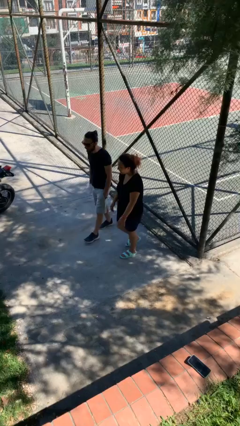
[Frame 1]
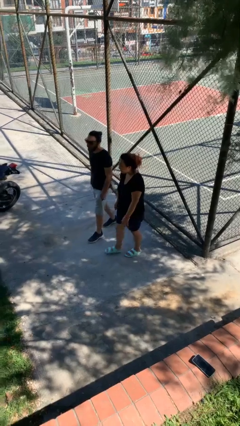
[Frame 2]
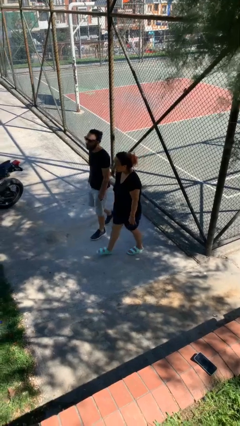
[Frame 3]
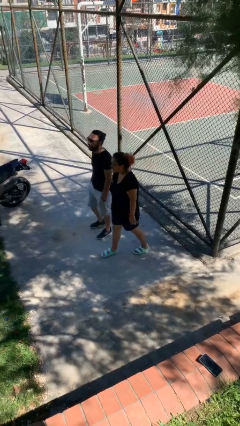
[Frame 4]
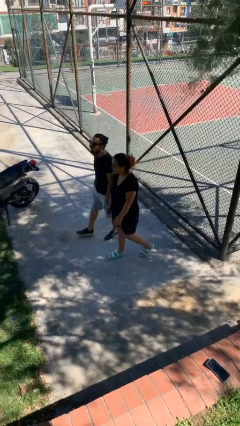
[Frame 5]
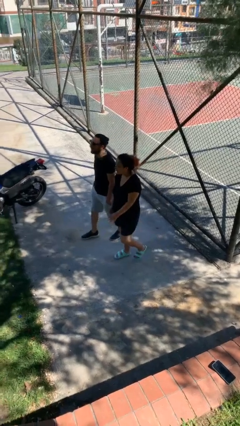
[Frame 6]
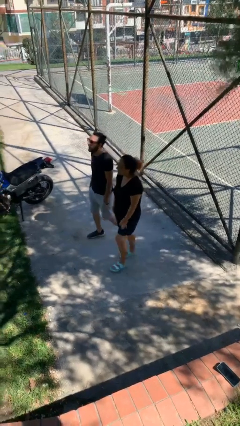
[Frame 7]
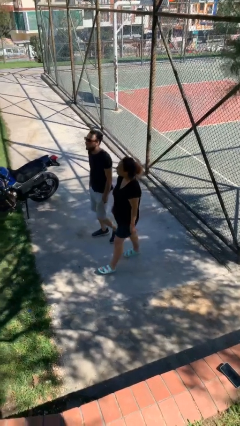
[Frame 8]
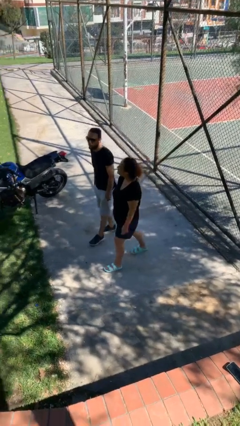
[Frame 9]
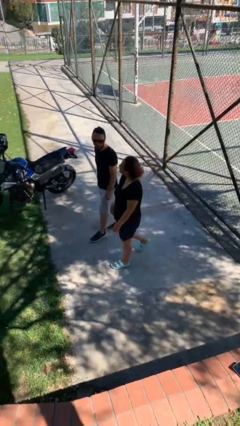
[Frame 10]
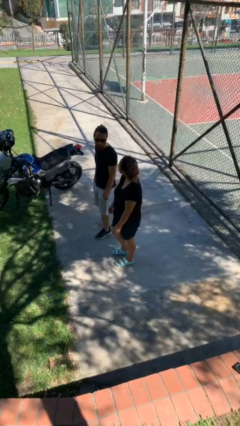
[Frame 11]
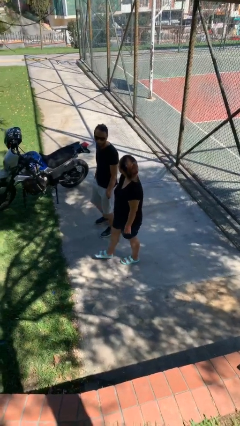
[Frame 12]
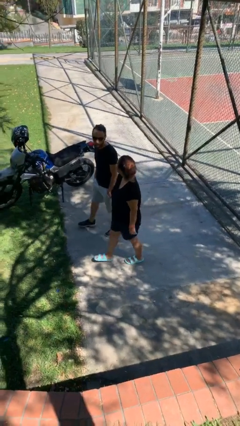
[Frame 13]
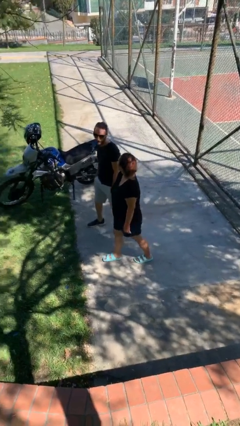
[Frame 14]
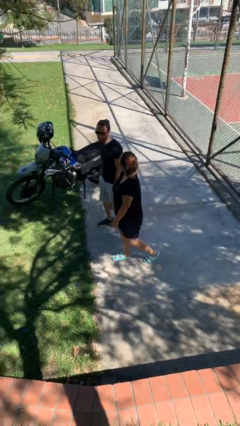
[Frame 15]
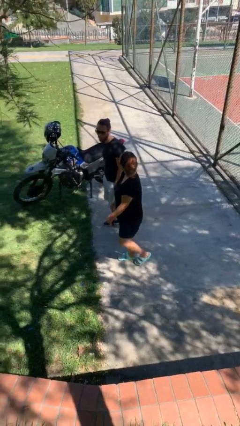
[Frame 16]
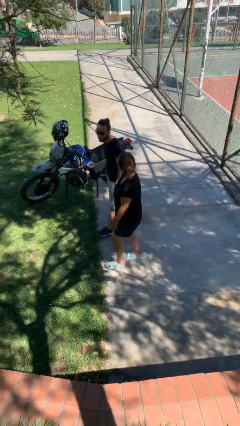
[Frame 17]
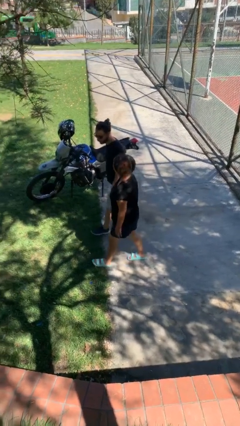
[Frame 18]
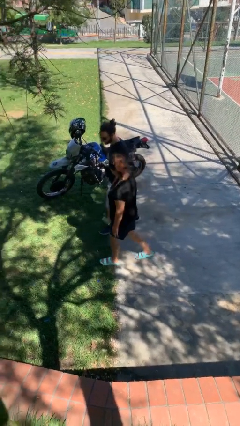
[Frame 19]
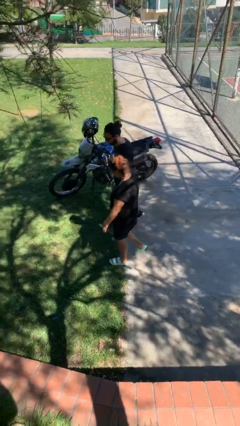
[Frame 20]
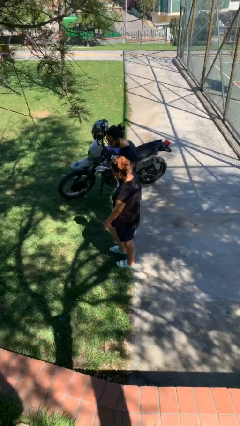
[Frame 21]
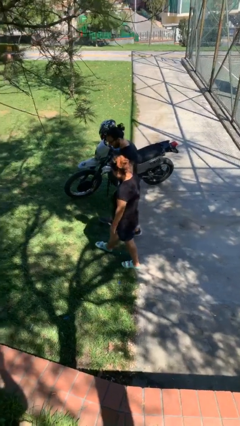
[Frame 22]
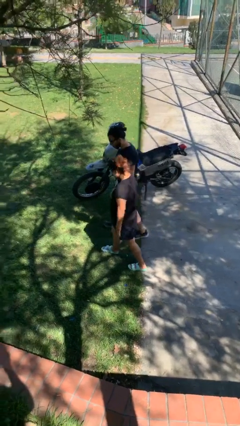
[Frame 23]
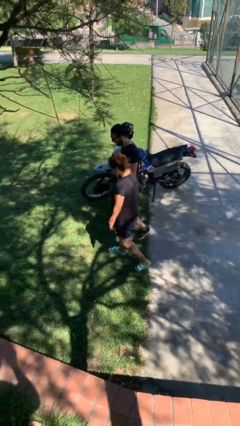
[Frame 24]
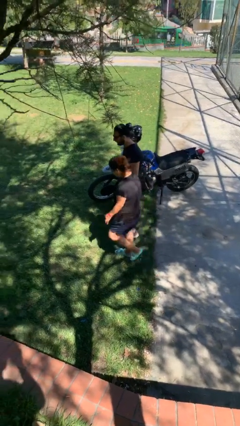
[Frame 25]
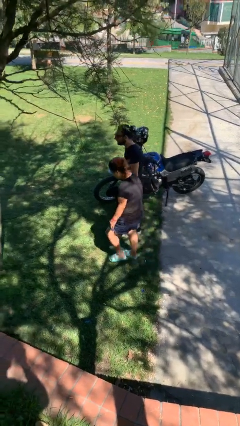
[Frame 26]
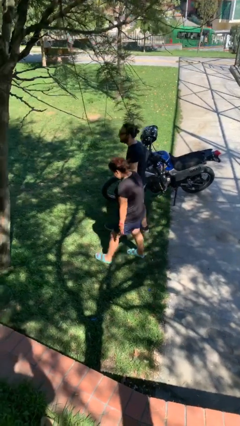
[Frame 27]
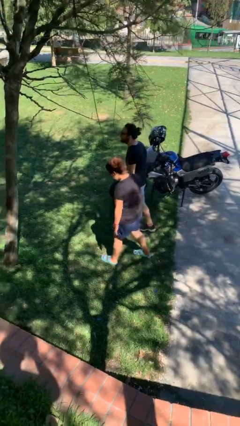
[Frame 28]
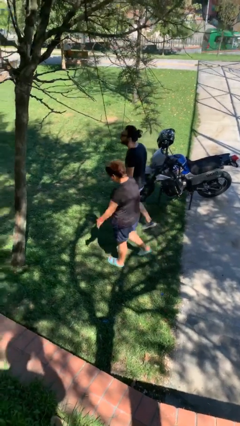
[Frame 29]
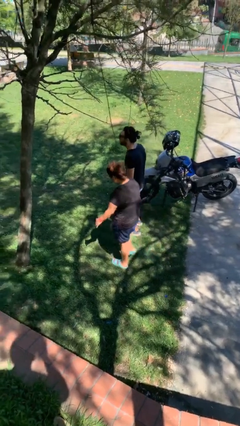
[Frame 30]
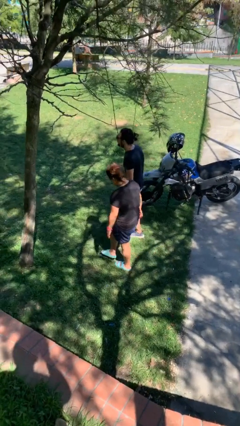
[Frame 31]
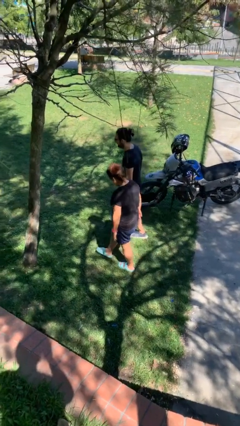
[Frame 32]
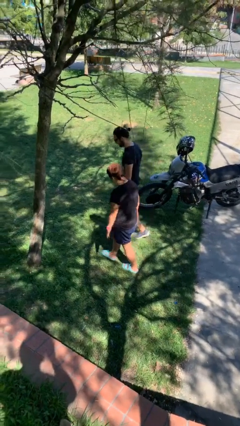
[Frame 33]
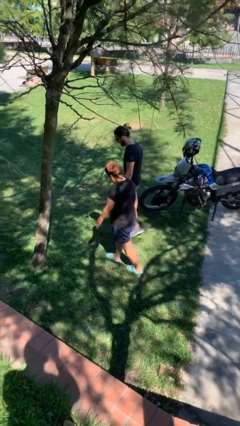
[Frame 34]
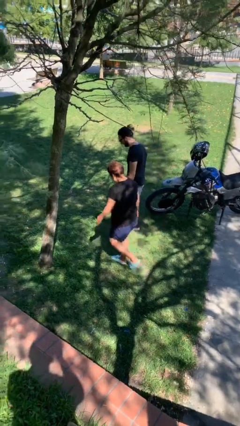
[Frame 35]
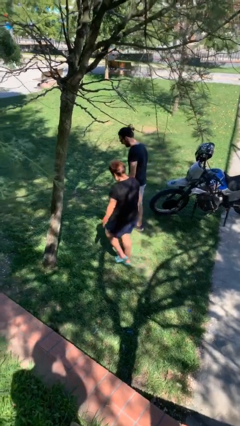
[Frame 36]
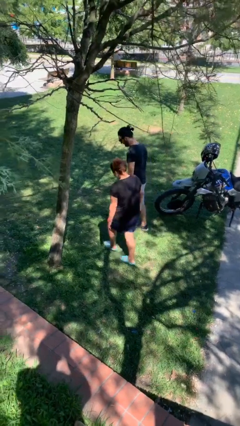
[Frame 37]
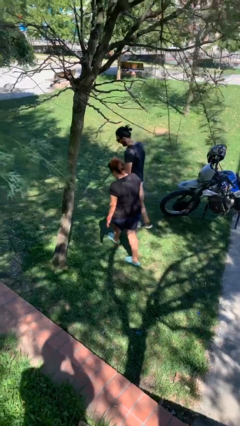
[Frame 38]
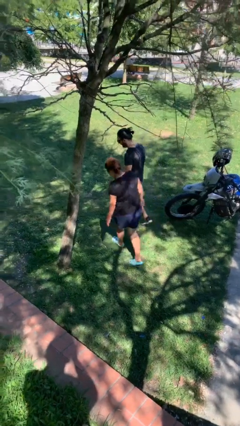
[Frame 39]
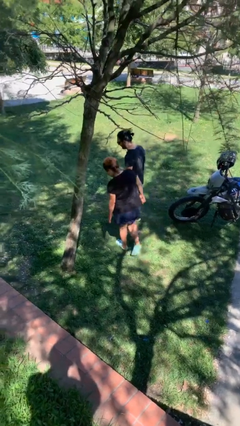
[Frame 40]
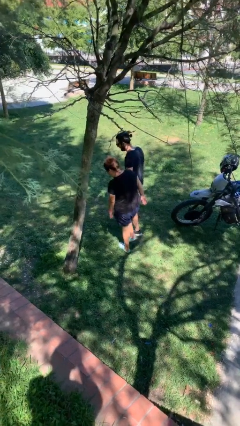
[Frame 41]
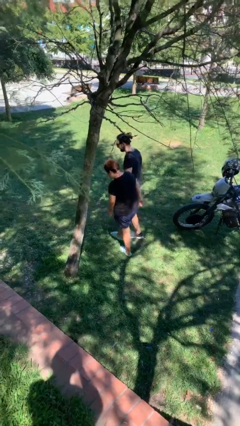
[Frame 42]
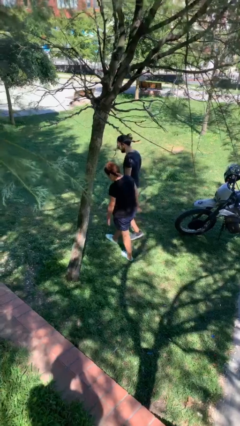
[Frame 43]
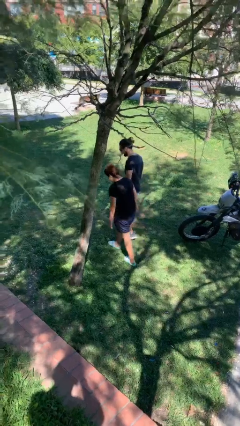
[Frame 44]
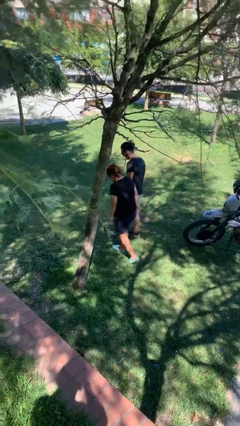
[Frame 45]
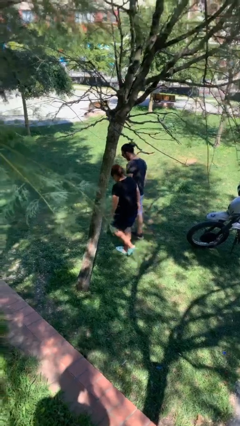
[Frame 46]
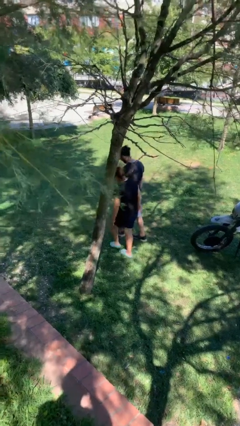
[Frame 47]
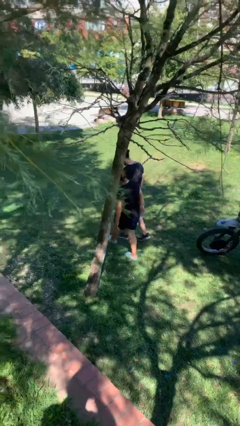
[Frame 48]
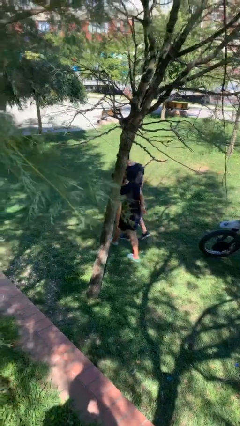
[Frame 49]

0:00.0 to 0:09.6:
person talks to person

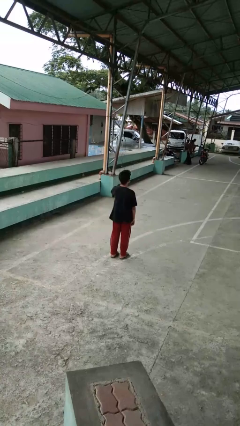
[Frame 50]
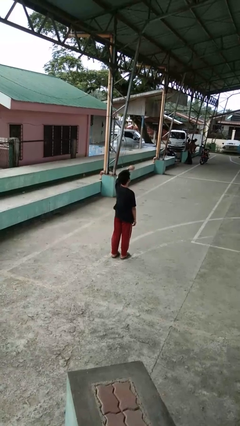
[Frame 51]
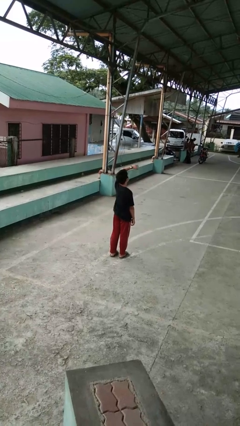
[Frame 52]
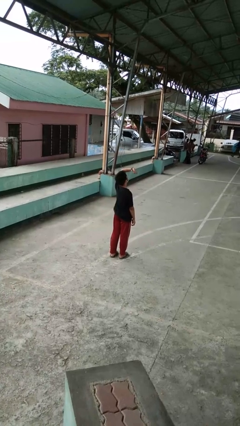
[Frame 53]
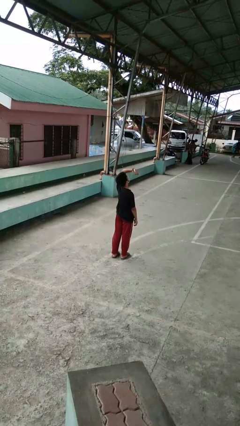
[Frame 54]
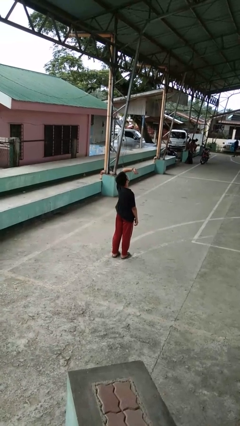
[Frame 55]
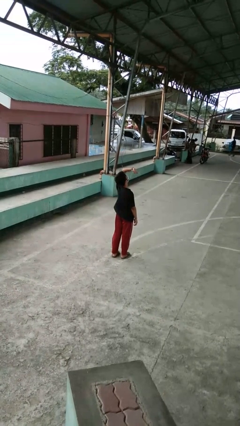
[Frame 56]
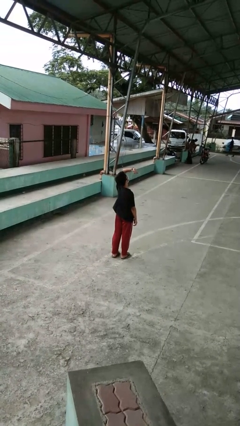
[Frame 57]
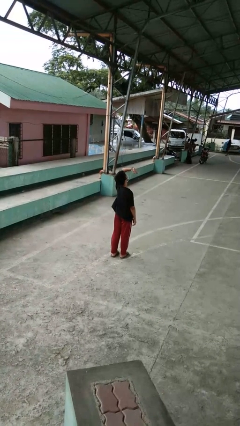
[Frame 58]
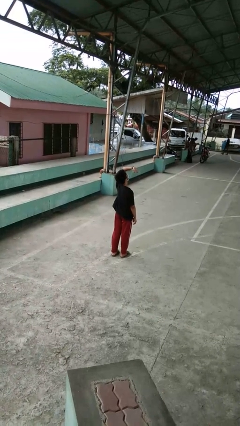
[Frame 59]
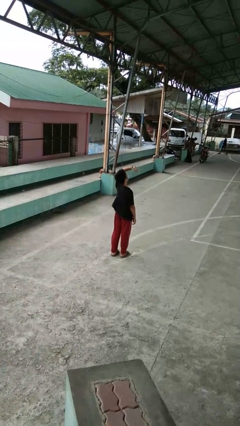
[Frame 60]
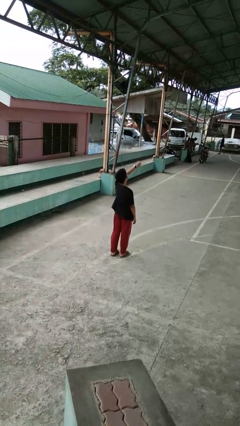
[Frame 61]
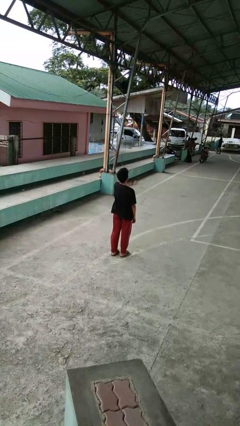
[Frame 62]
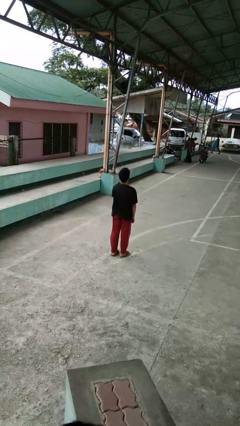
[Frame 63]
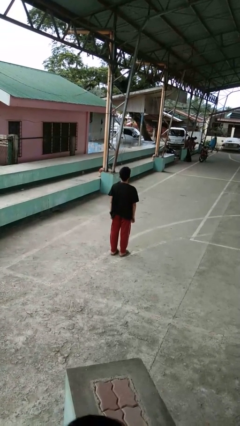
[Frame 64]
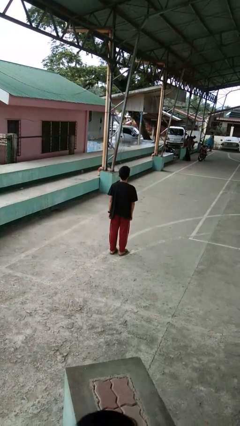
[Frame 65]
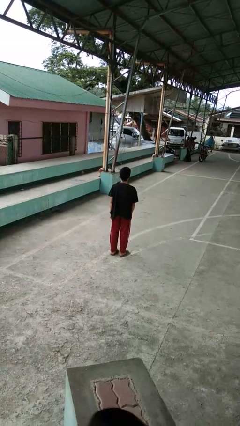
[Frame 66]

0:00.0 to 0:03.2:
person looks at wristwatch

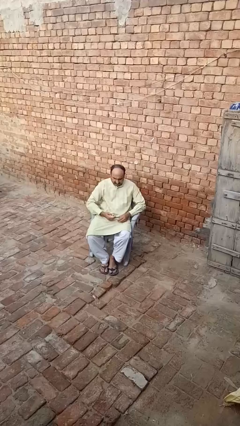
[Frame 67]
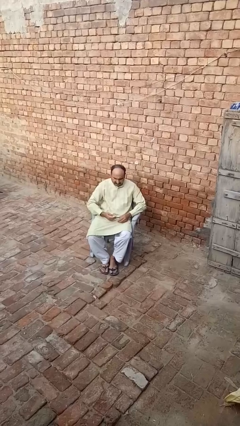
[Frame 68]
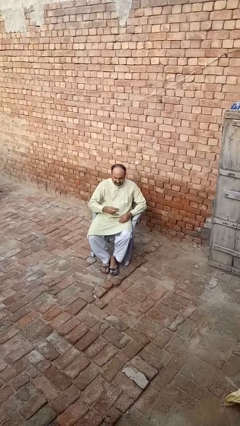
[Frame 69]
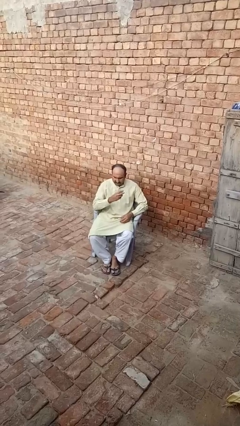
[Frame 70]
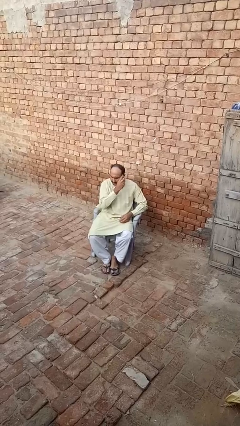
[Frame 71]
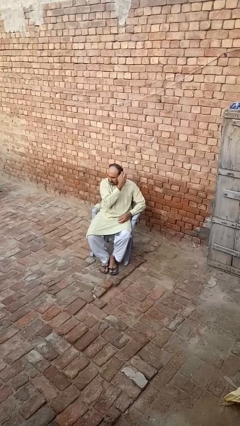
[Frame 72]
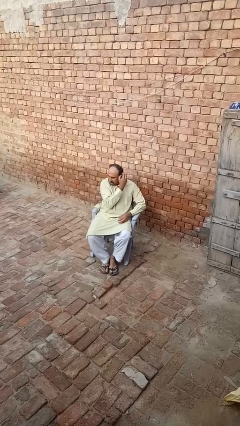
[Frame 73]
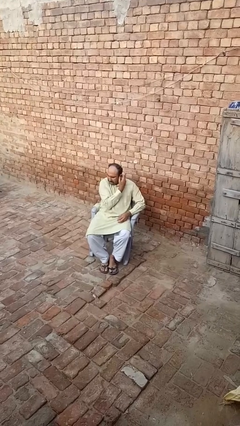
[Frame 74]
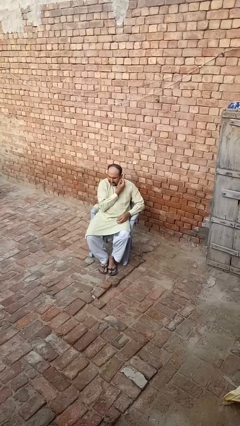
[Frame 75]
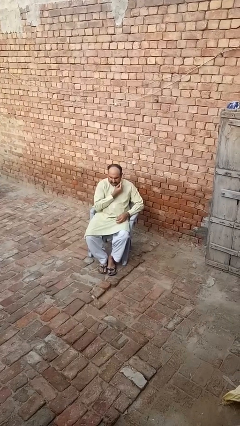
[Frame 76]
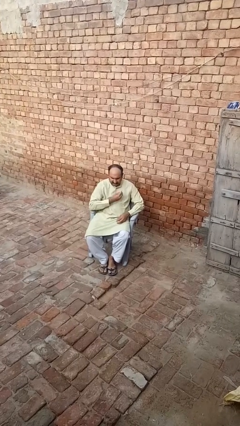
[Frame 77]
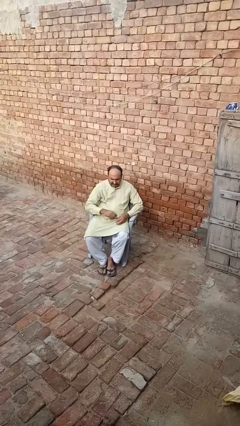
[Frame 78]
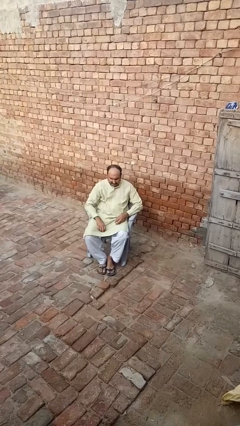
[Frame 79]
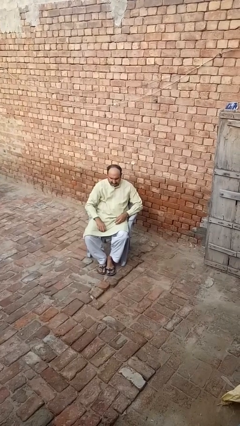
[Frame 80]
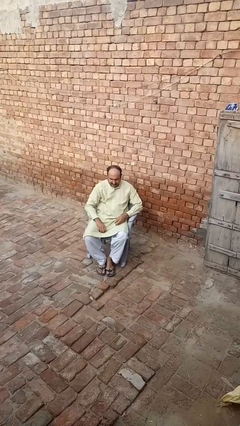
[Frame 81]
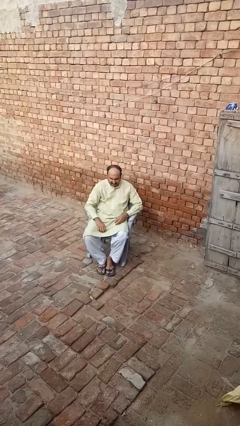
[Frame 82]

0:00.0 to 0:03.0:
person puts on earrings

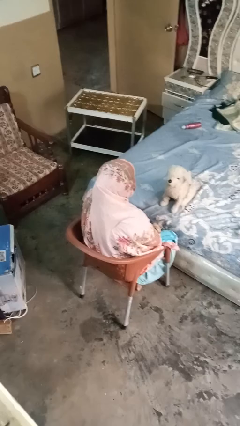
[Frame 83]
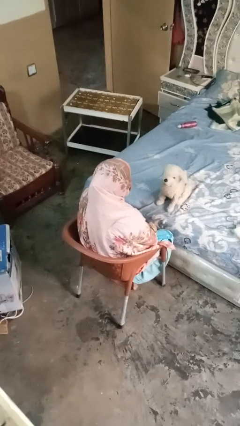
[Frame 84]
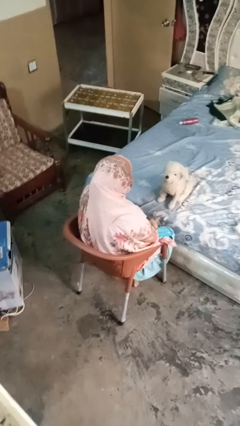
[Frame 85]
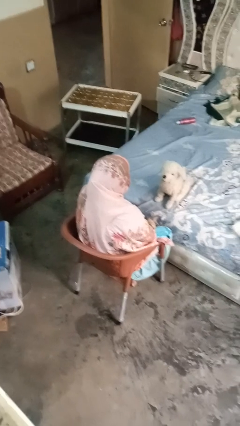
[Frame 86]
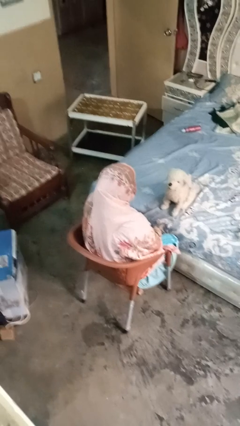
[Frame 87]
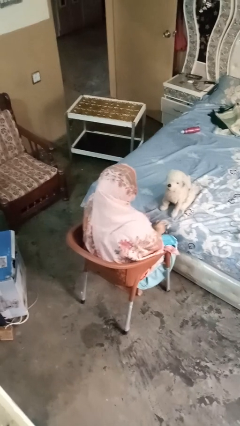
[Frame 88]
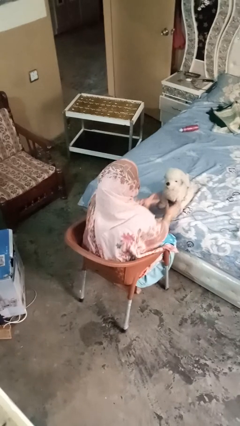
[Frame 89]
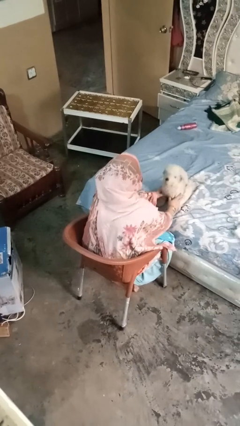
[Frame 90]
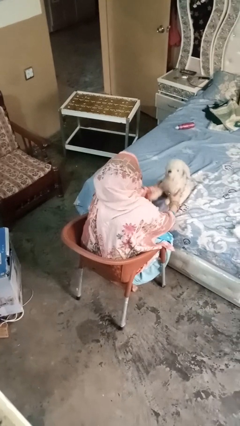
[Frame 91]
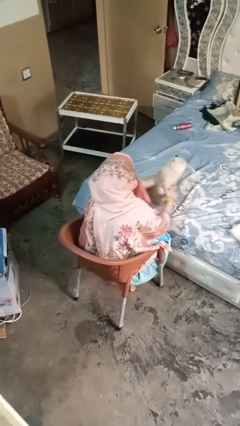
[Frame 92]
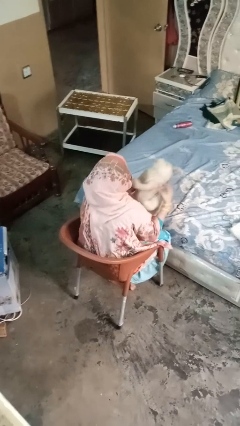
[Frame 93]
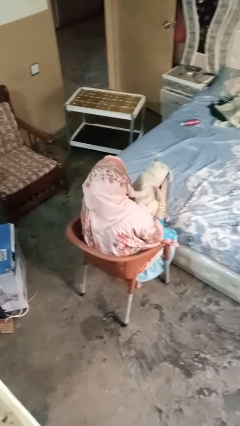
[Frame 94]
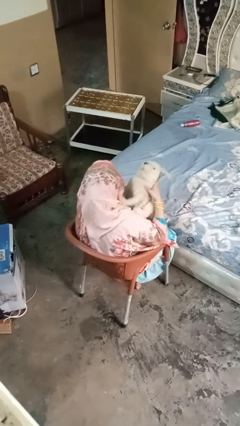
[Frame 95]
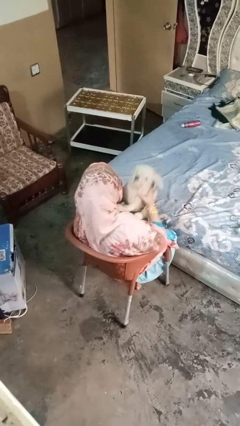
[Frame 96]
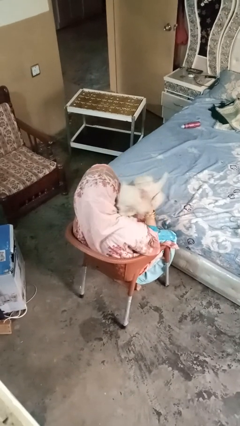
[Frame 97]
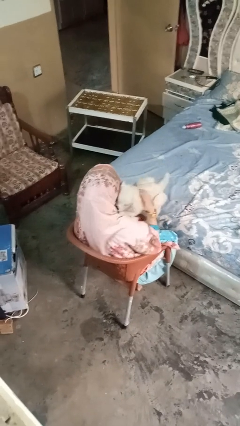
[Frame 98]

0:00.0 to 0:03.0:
person hugs stuffed animal
